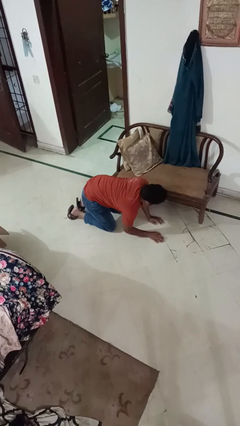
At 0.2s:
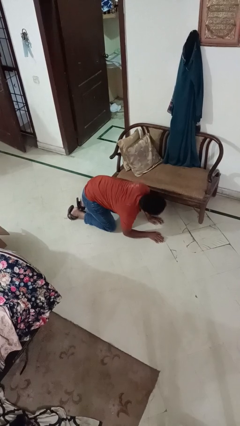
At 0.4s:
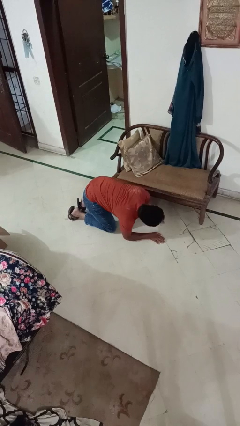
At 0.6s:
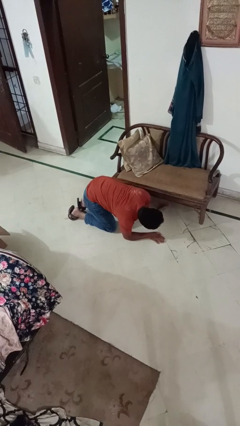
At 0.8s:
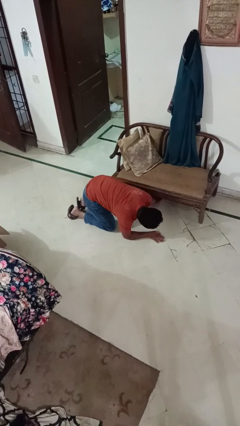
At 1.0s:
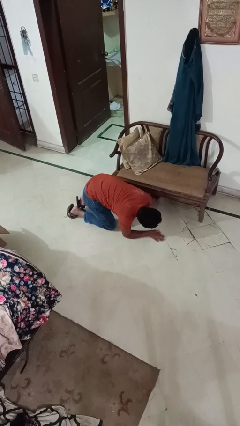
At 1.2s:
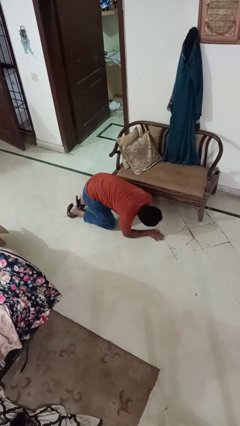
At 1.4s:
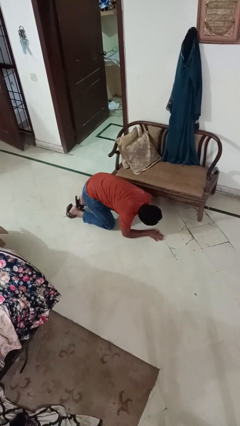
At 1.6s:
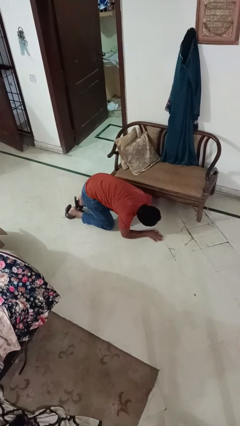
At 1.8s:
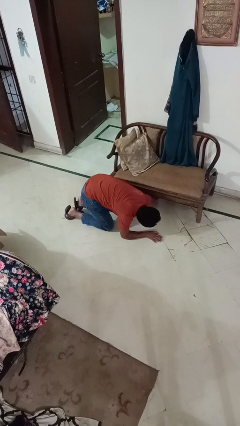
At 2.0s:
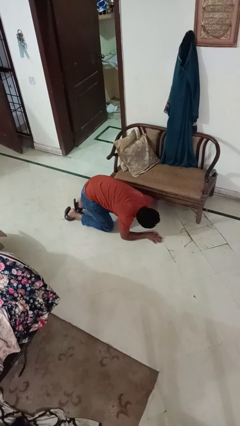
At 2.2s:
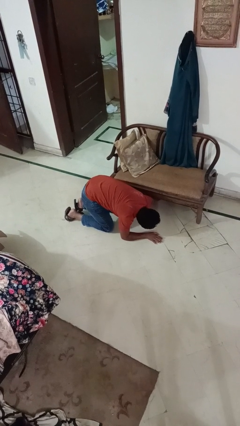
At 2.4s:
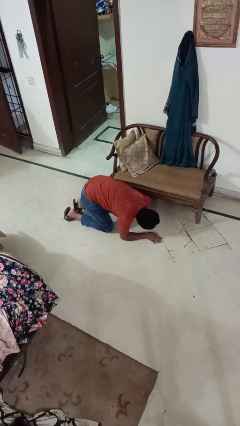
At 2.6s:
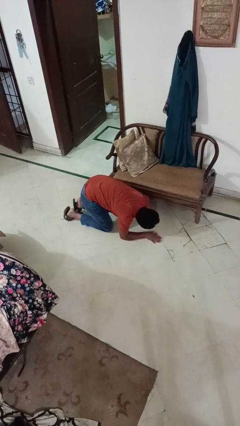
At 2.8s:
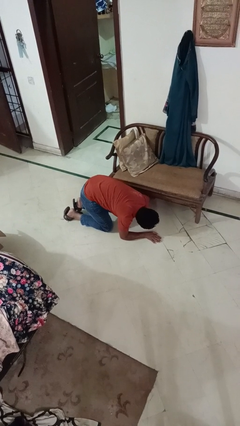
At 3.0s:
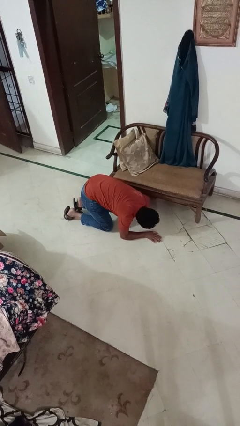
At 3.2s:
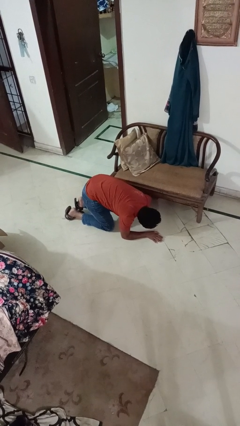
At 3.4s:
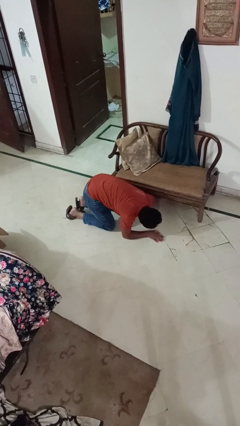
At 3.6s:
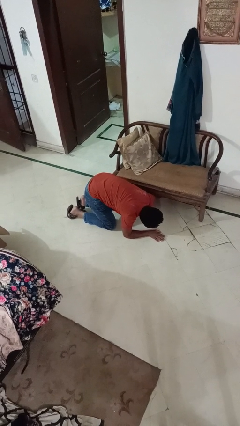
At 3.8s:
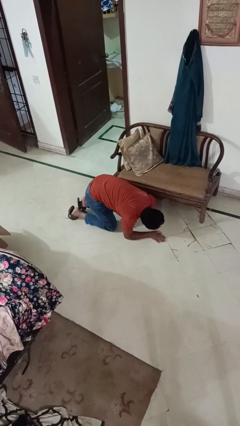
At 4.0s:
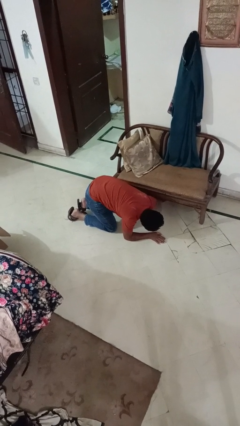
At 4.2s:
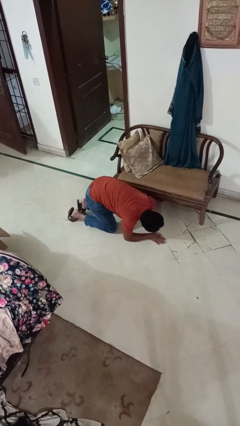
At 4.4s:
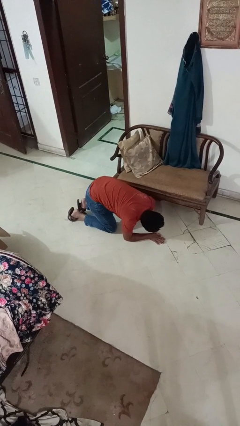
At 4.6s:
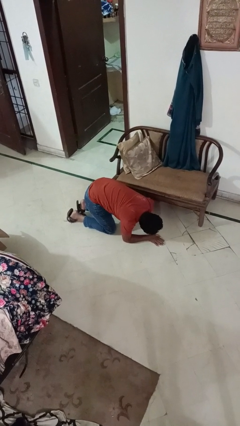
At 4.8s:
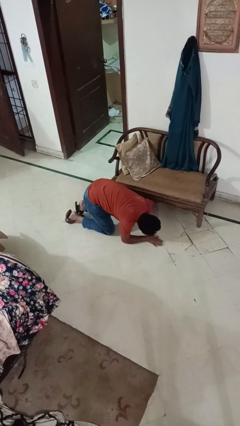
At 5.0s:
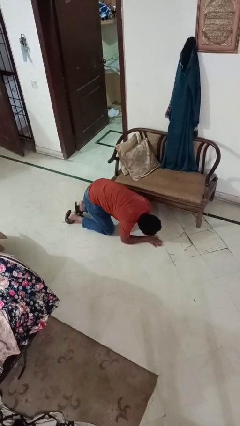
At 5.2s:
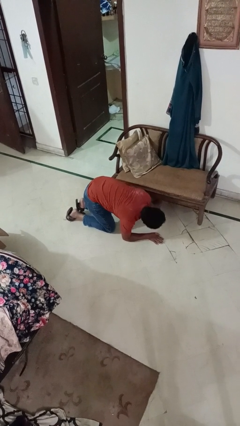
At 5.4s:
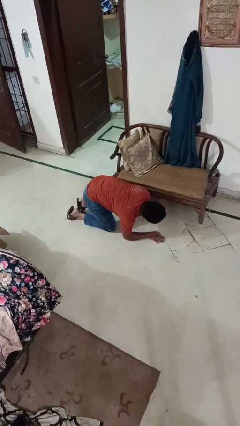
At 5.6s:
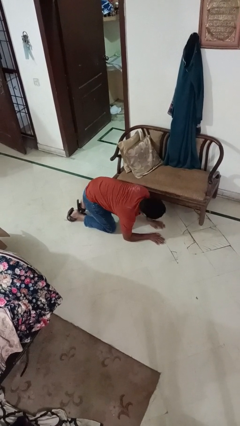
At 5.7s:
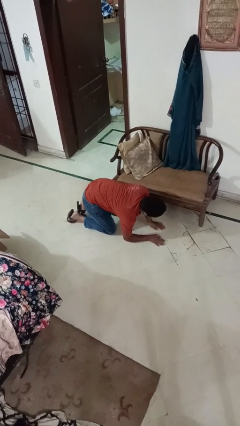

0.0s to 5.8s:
person searches under couch

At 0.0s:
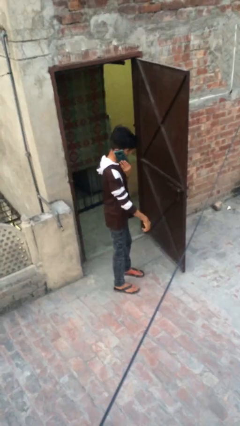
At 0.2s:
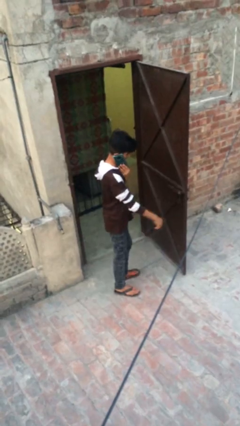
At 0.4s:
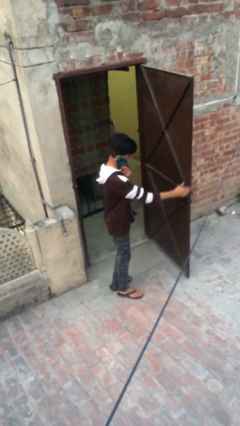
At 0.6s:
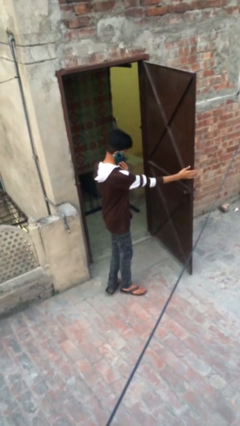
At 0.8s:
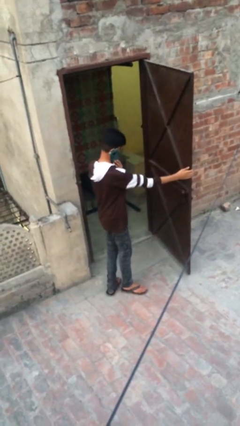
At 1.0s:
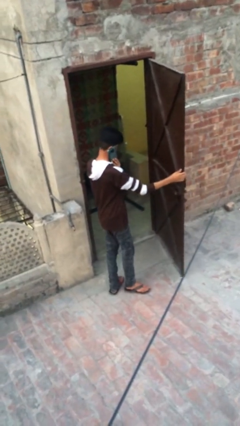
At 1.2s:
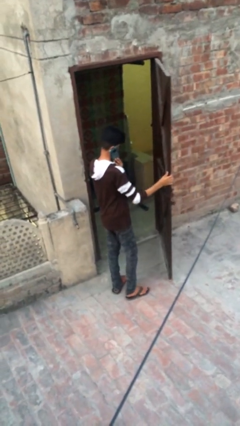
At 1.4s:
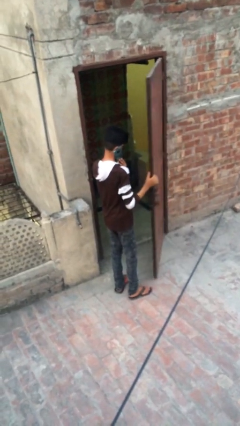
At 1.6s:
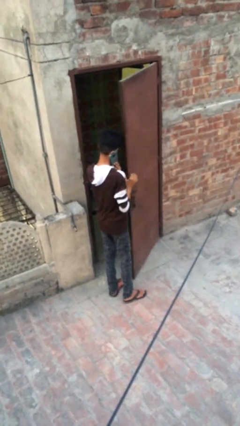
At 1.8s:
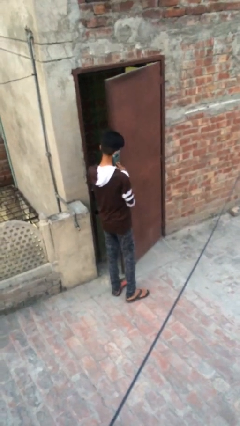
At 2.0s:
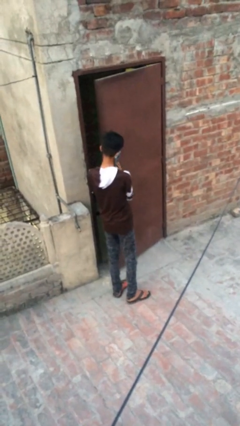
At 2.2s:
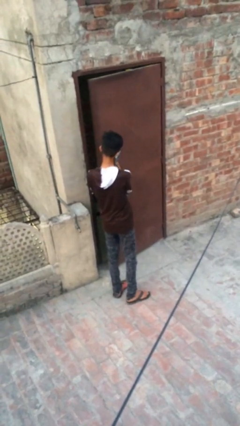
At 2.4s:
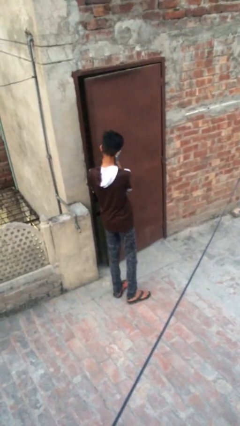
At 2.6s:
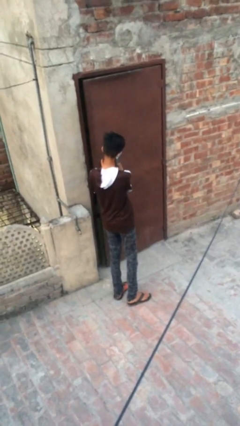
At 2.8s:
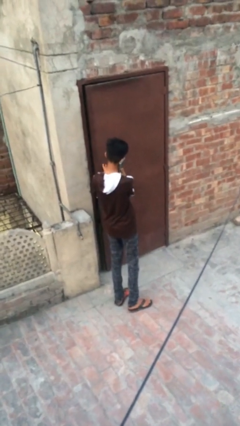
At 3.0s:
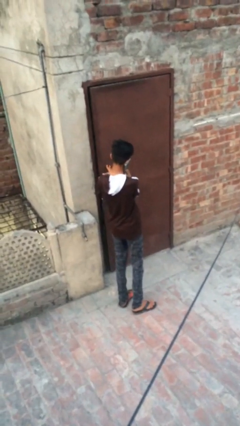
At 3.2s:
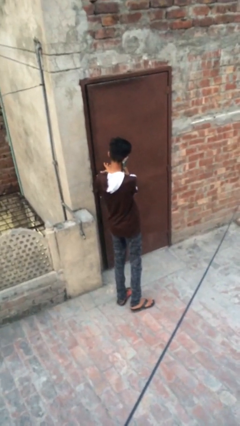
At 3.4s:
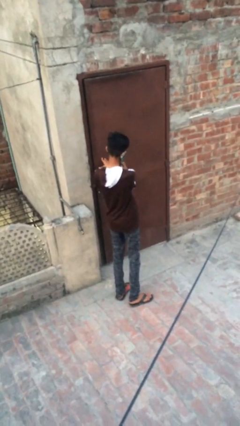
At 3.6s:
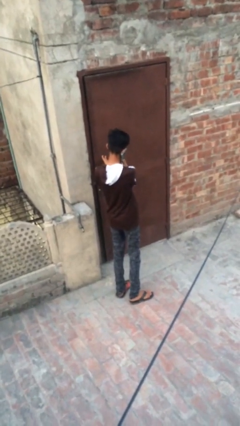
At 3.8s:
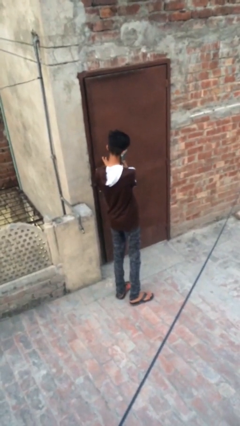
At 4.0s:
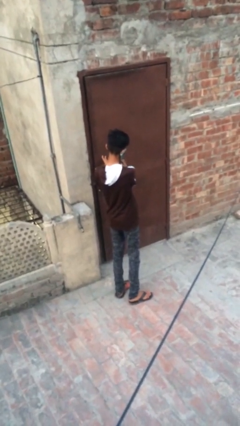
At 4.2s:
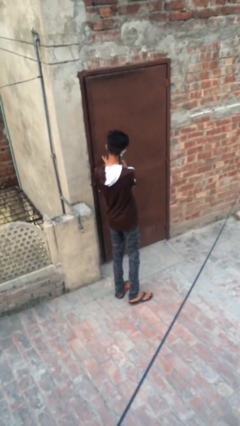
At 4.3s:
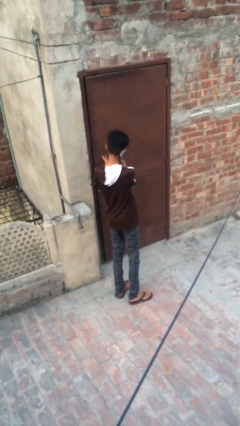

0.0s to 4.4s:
person closes facility door

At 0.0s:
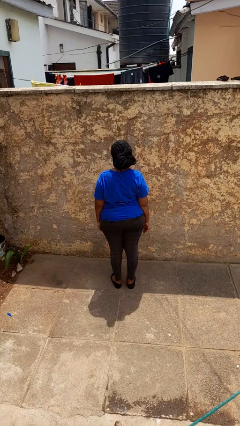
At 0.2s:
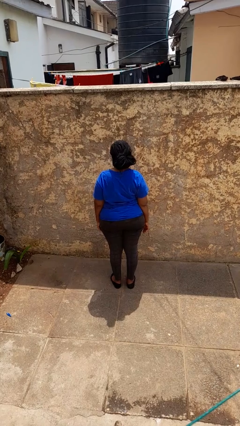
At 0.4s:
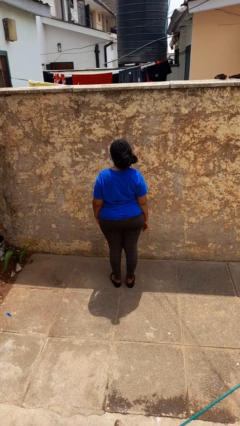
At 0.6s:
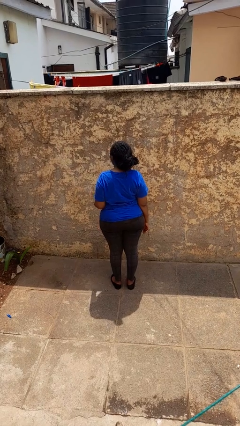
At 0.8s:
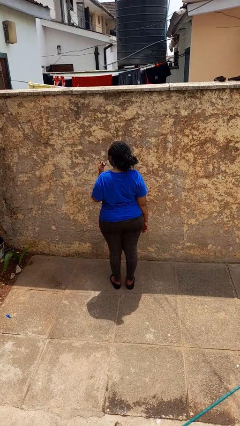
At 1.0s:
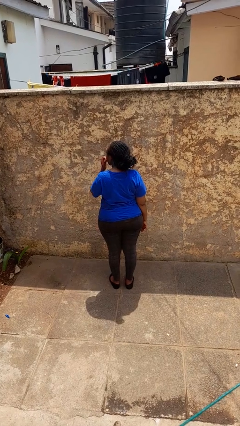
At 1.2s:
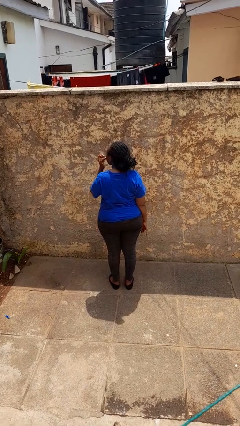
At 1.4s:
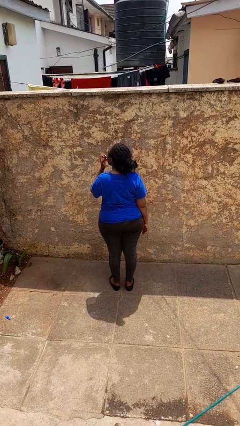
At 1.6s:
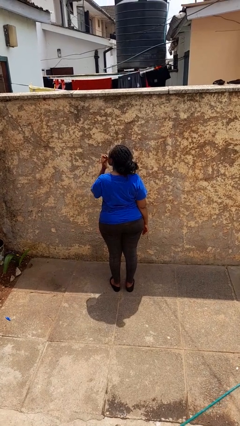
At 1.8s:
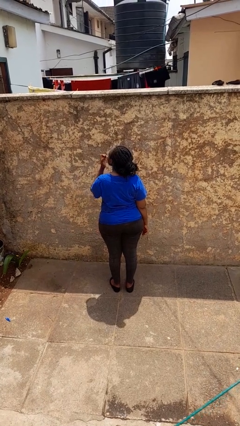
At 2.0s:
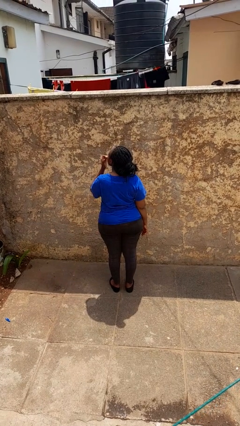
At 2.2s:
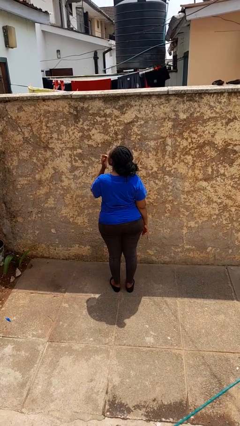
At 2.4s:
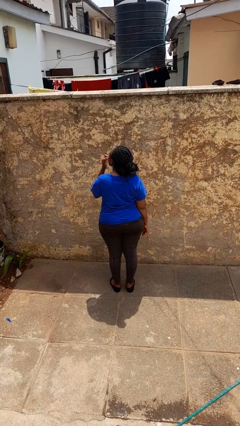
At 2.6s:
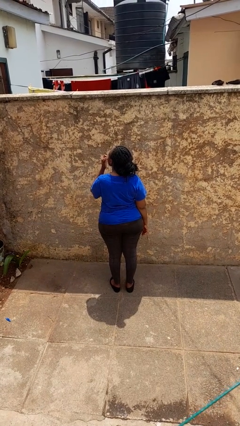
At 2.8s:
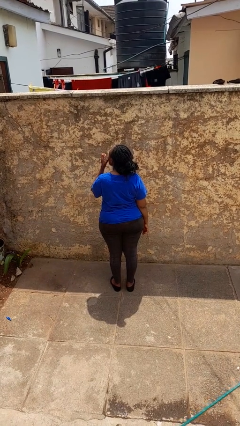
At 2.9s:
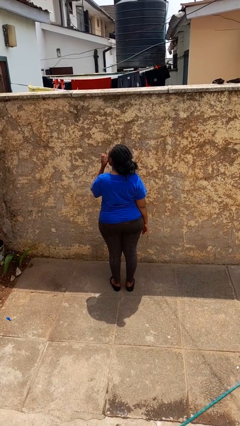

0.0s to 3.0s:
person licks fingers

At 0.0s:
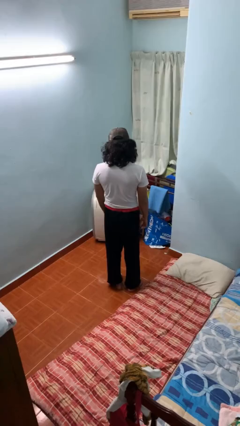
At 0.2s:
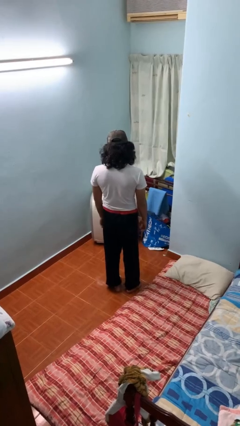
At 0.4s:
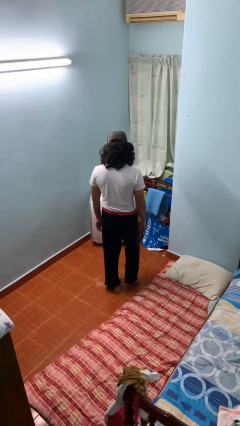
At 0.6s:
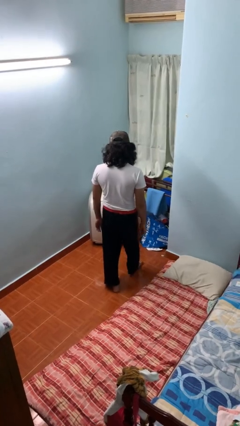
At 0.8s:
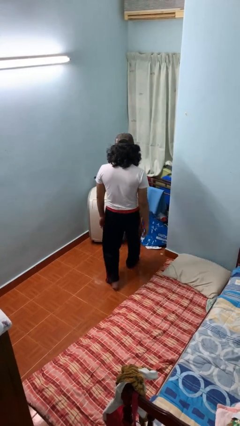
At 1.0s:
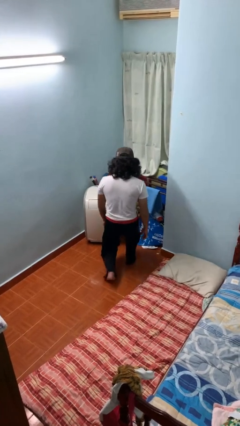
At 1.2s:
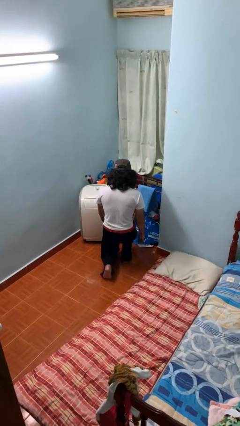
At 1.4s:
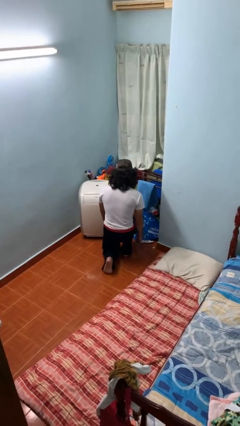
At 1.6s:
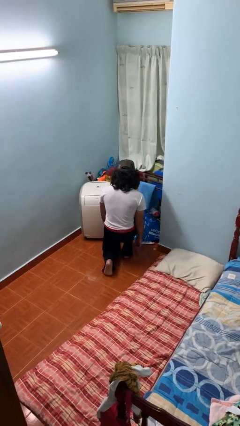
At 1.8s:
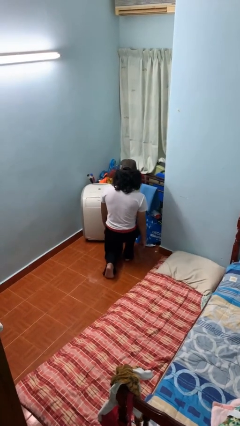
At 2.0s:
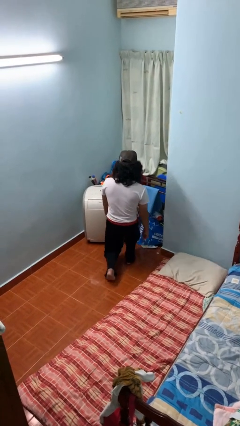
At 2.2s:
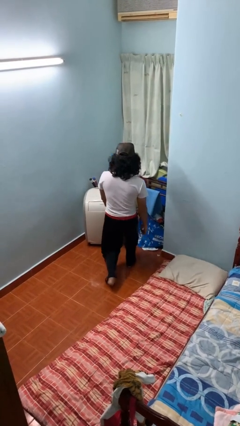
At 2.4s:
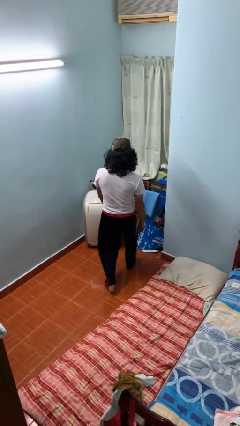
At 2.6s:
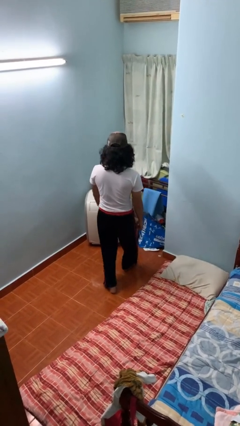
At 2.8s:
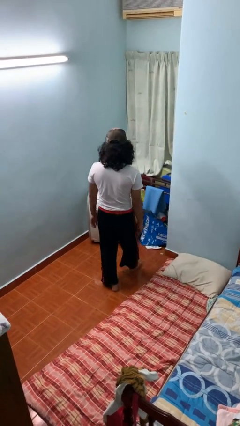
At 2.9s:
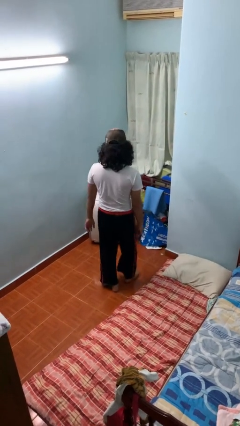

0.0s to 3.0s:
person exercises with lunges

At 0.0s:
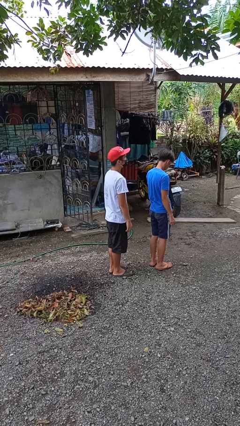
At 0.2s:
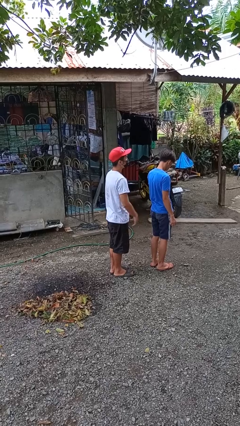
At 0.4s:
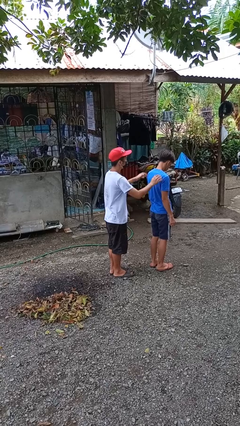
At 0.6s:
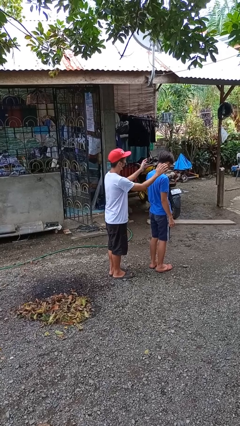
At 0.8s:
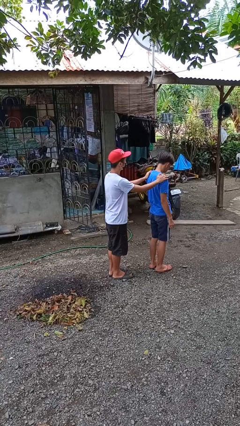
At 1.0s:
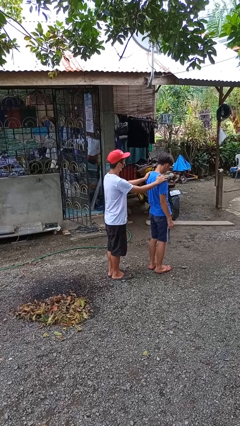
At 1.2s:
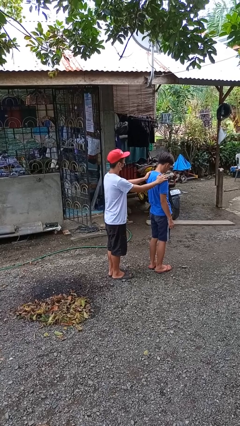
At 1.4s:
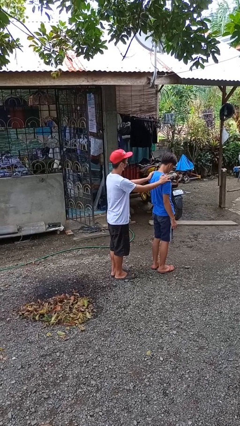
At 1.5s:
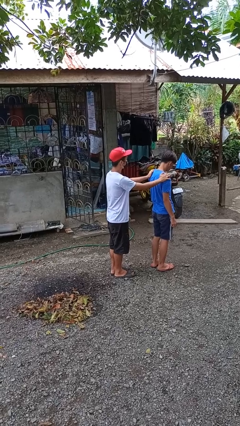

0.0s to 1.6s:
person grabs person by shoulder
